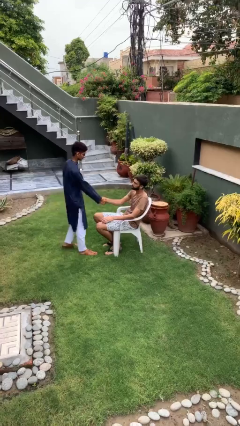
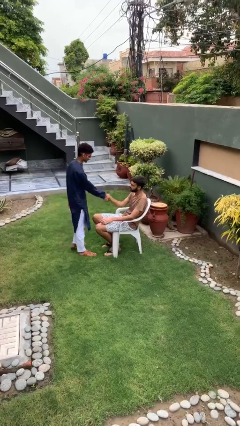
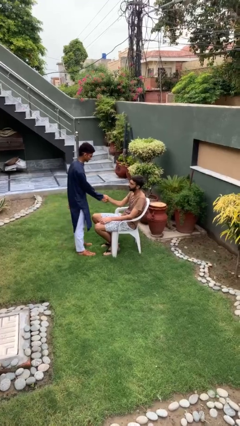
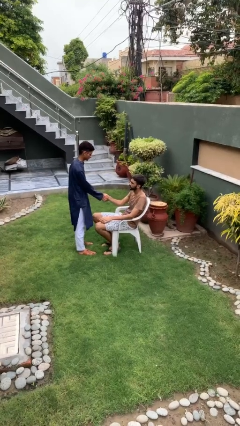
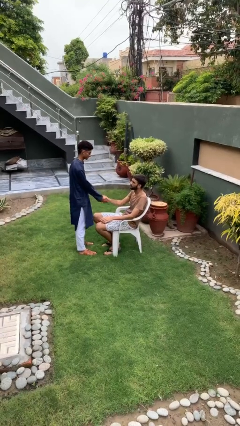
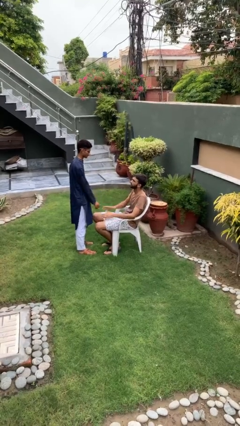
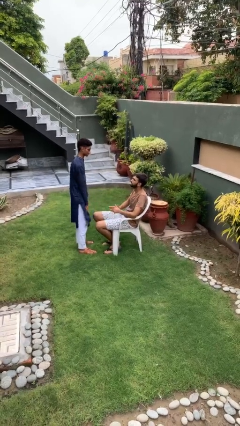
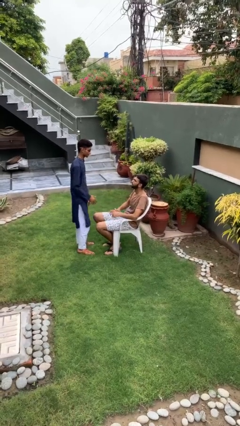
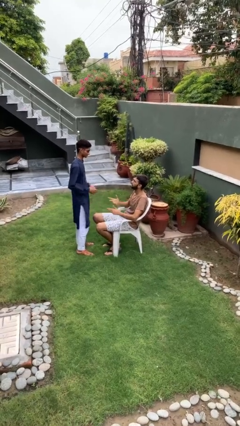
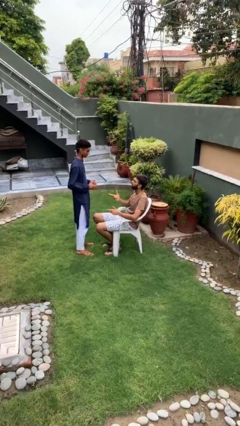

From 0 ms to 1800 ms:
person shakes hand

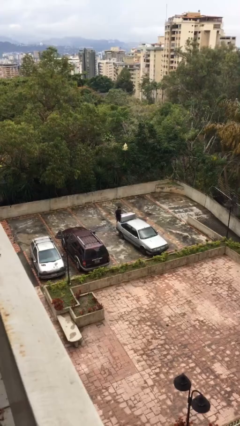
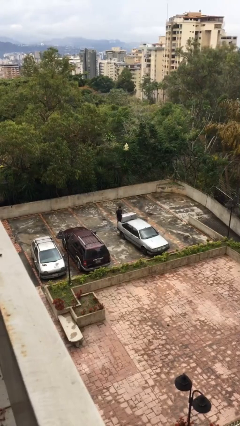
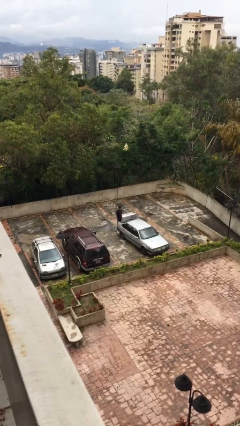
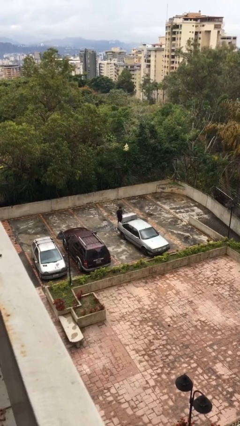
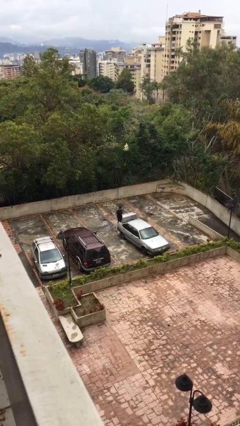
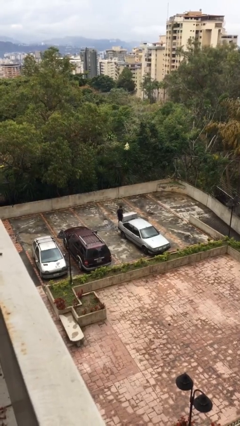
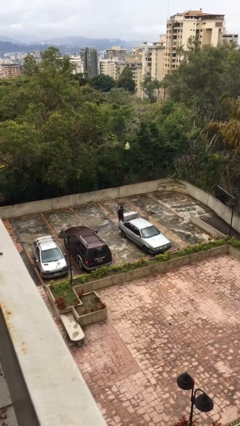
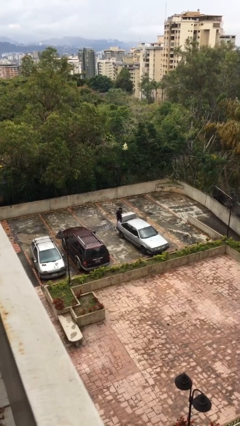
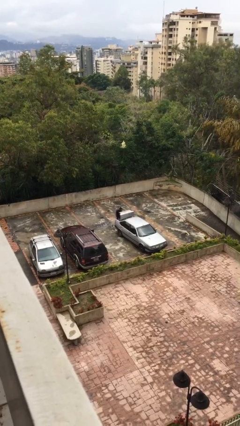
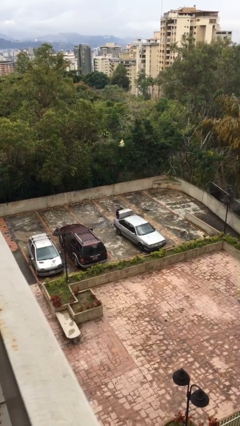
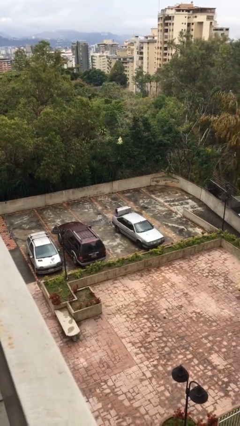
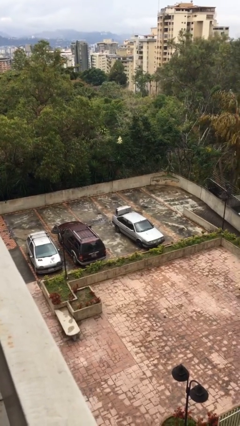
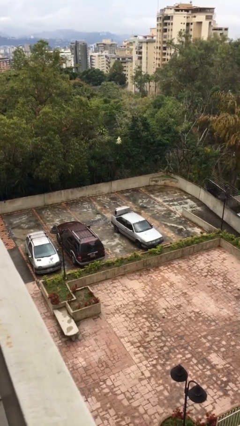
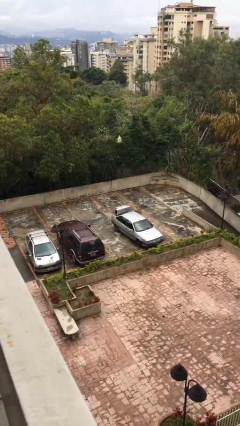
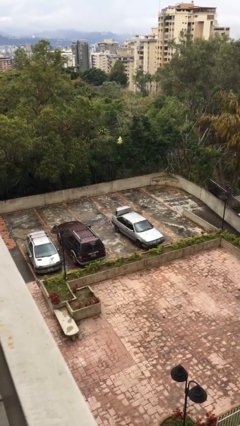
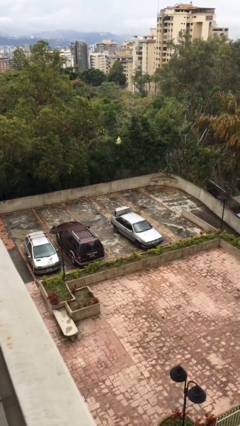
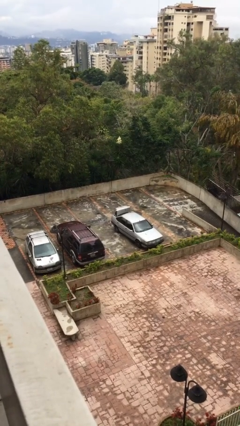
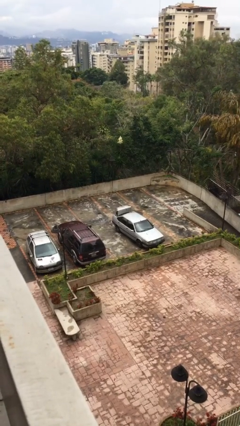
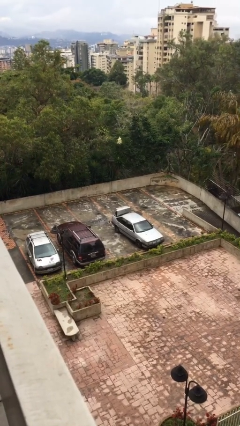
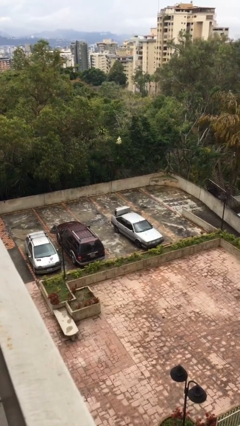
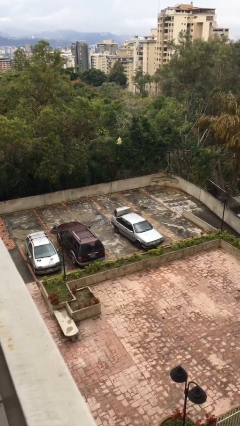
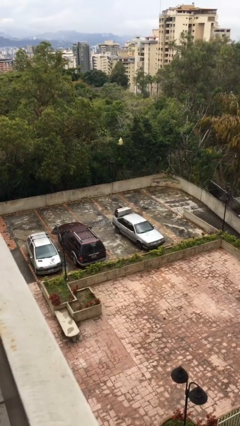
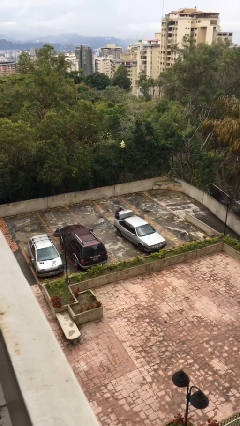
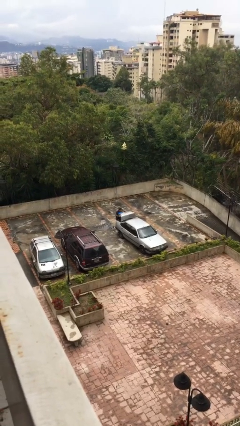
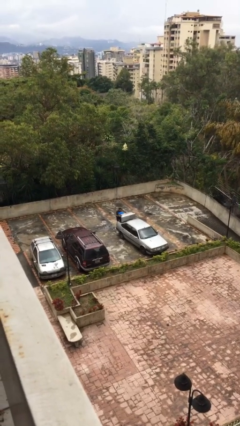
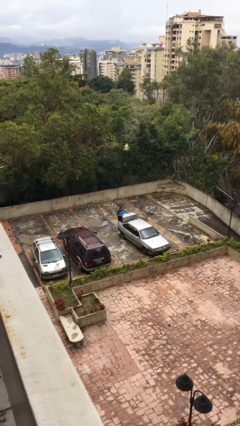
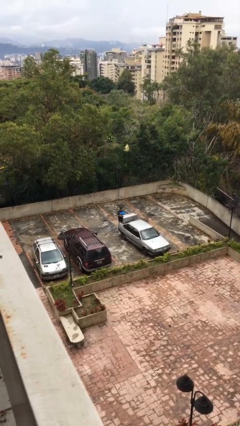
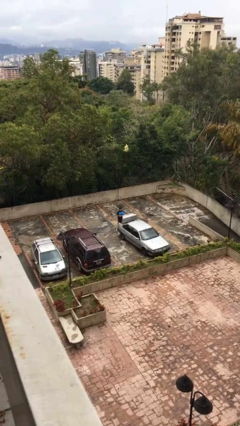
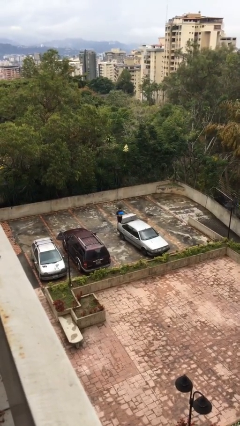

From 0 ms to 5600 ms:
person unloads car

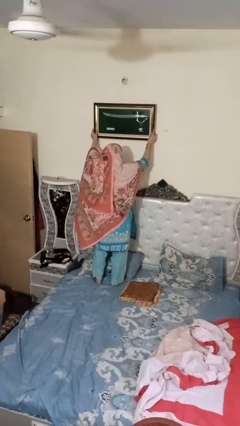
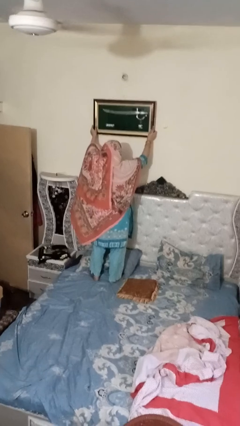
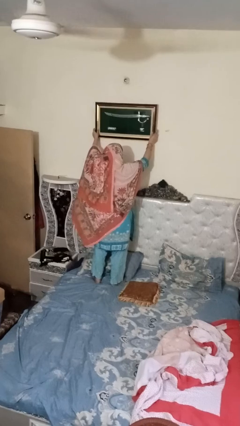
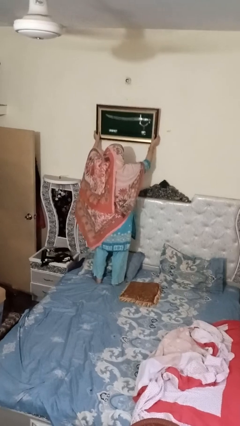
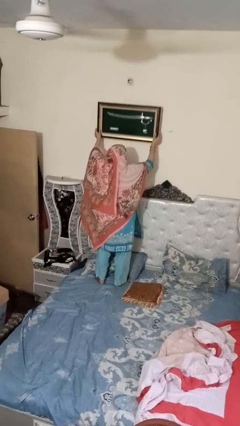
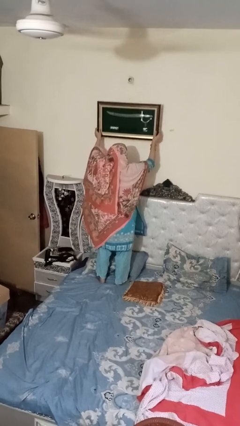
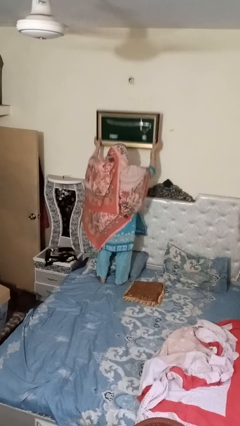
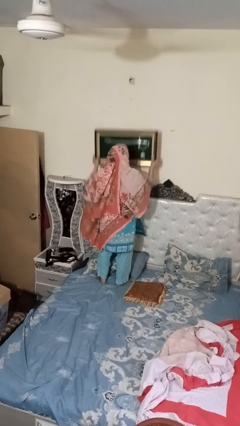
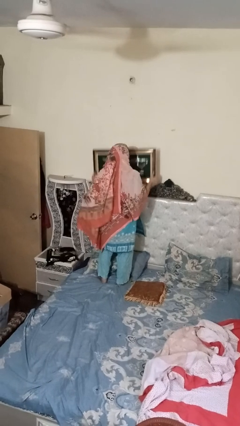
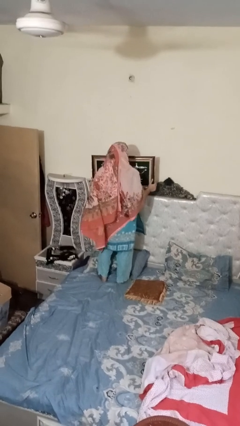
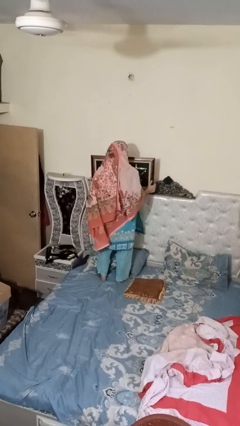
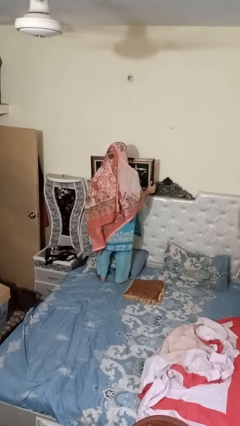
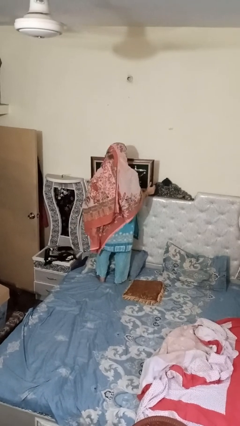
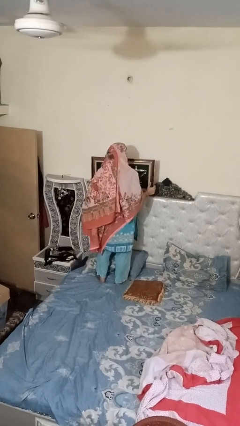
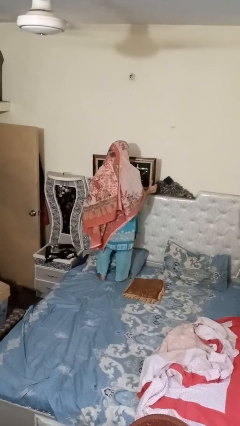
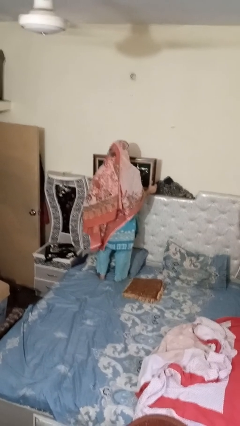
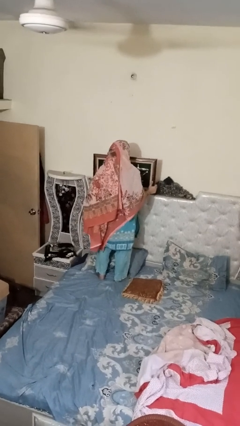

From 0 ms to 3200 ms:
person puts up picture frame

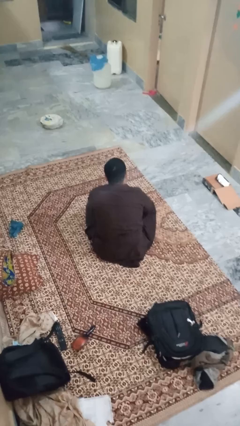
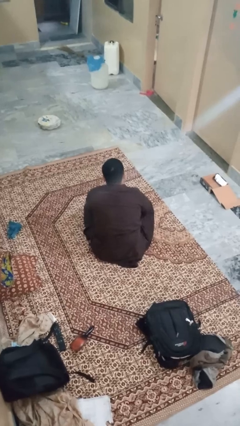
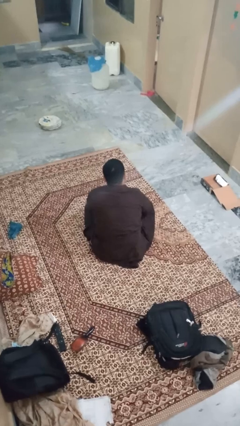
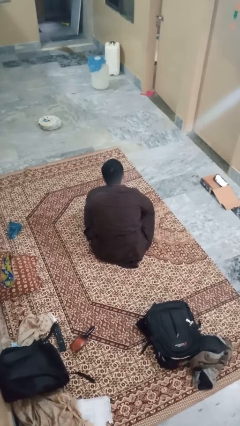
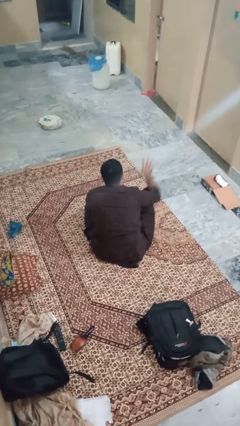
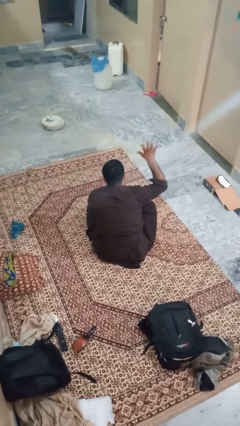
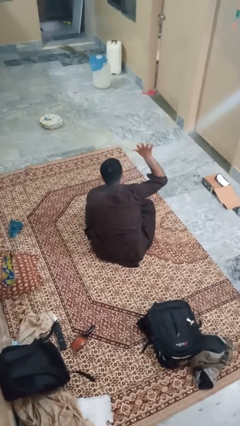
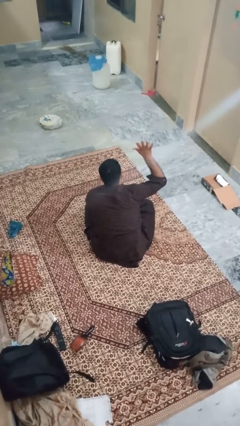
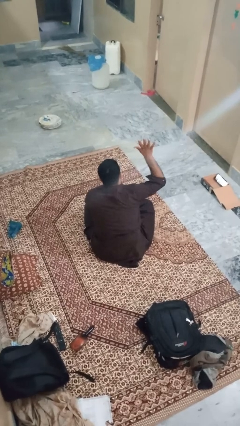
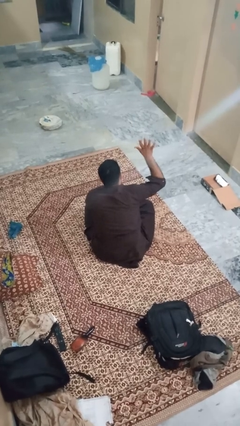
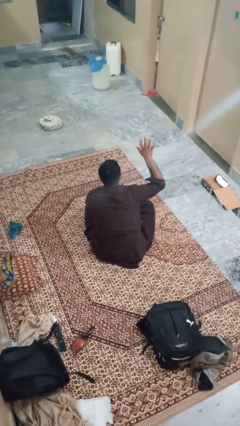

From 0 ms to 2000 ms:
person gestures number five

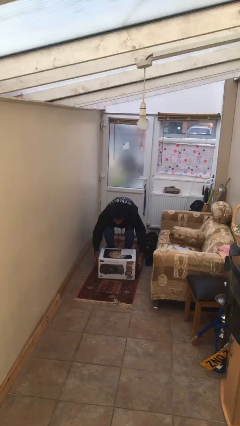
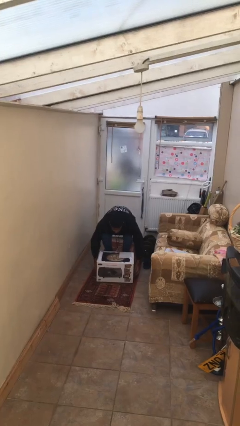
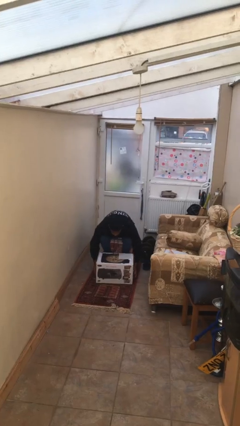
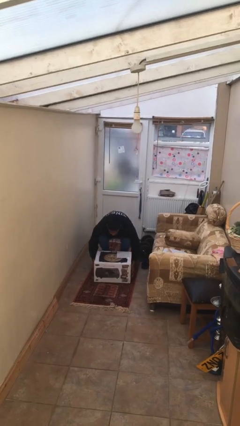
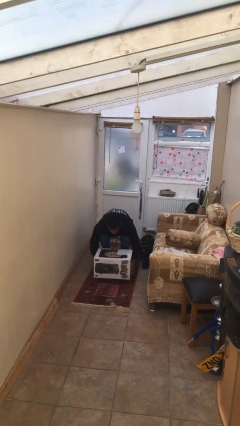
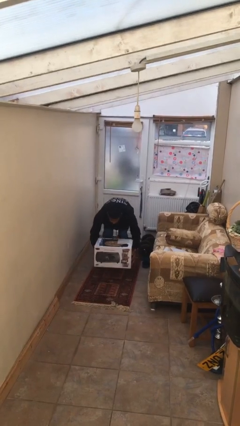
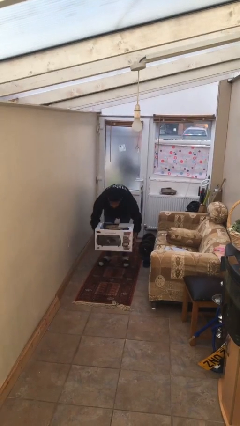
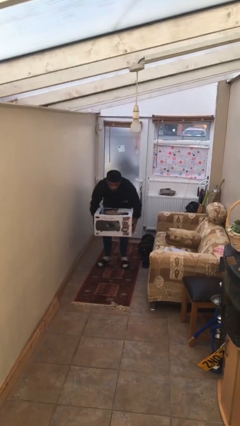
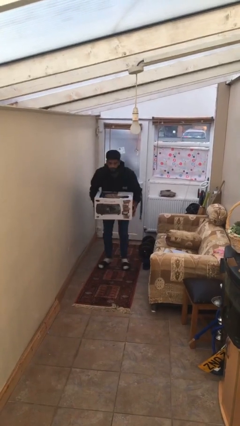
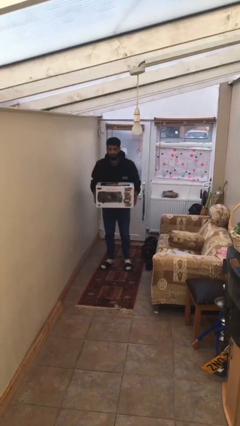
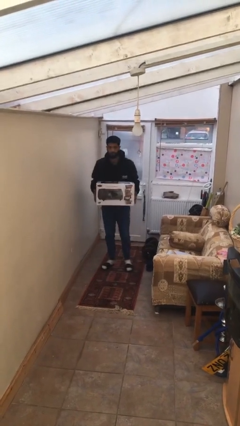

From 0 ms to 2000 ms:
person picks up object from floor

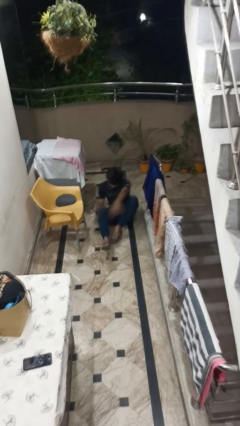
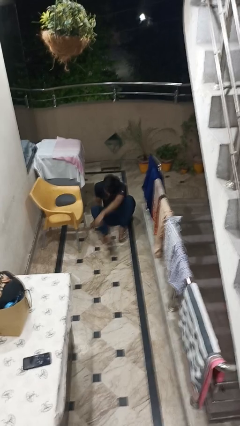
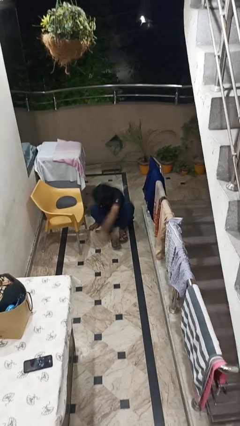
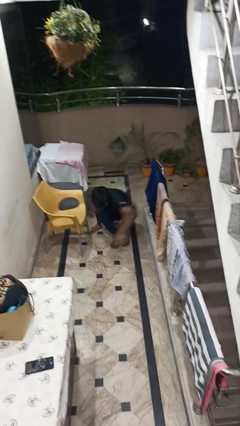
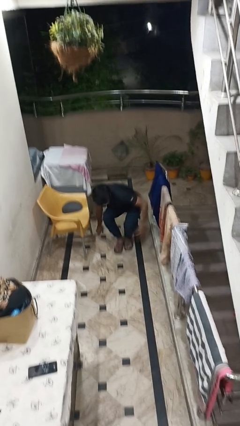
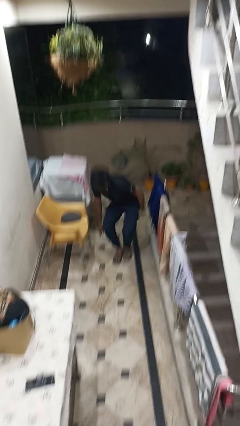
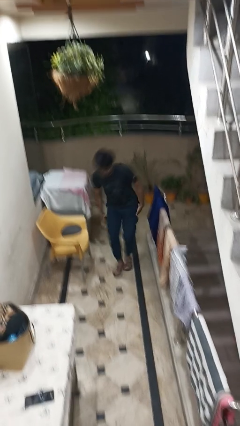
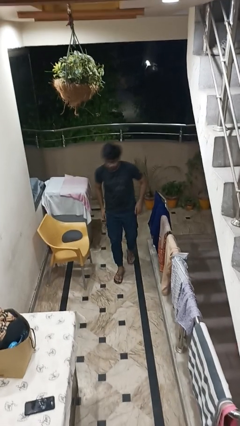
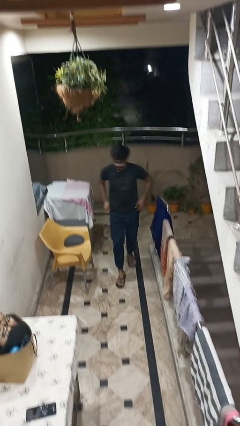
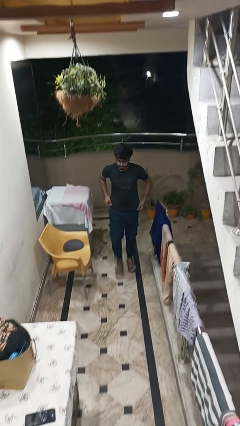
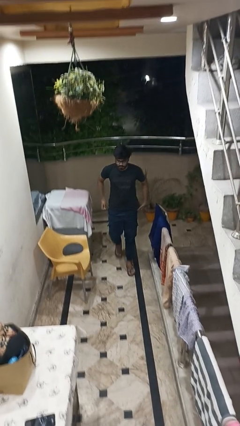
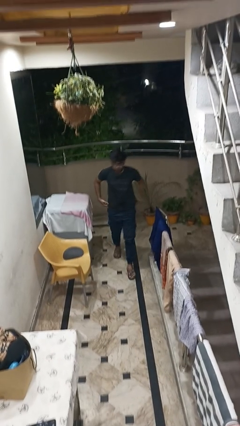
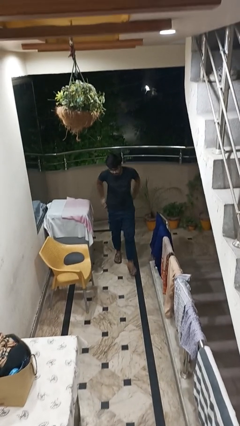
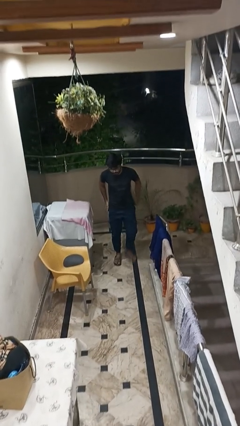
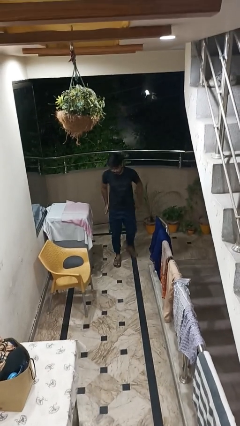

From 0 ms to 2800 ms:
person stands up from floor
